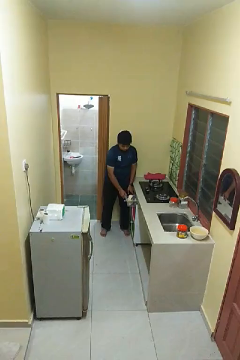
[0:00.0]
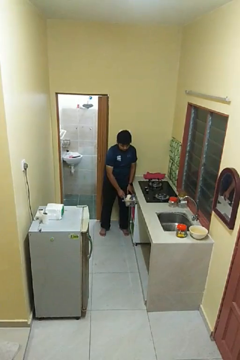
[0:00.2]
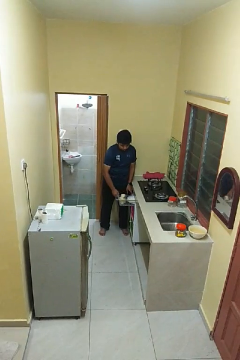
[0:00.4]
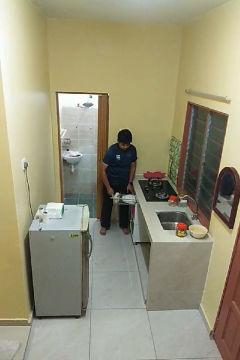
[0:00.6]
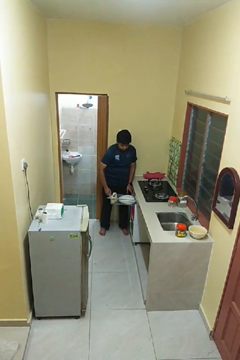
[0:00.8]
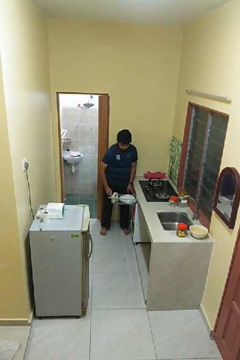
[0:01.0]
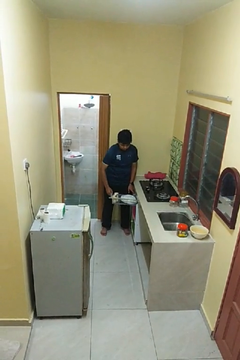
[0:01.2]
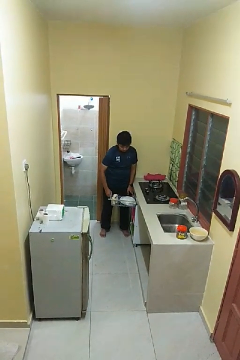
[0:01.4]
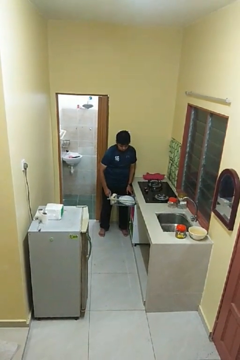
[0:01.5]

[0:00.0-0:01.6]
person opens kitchen drawer

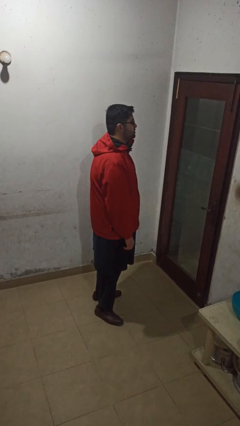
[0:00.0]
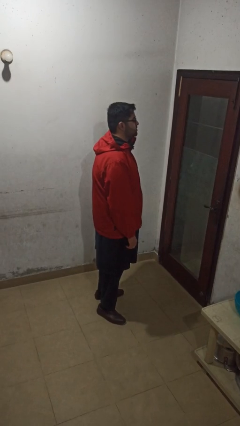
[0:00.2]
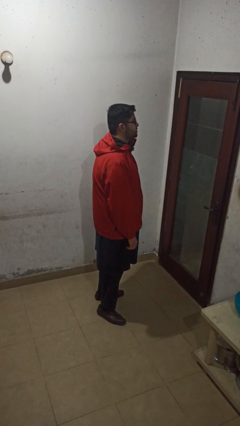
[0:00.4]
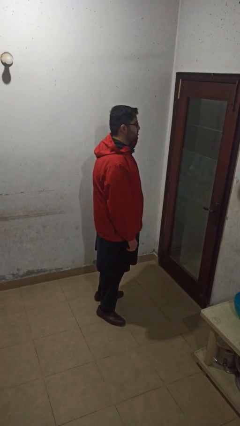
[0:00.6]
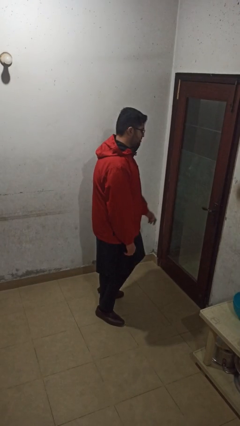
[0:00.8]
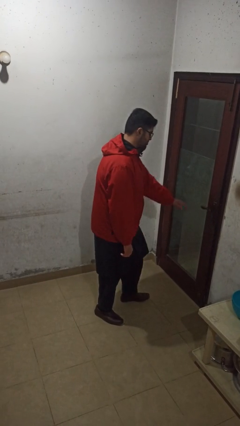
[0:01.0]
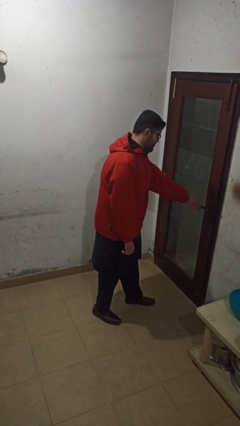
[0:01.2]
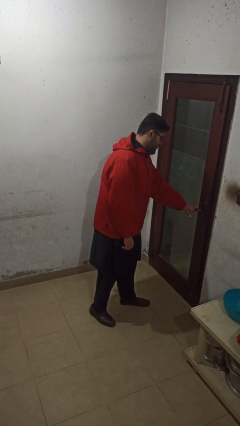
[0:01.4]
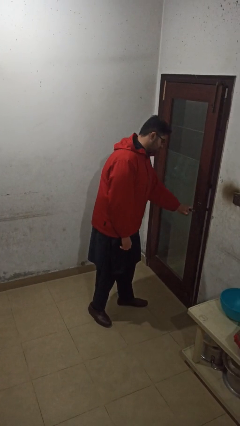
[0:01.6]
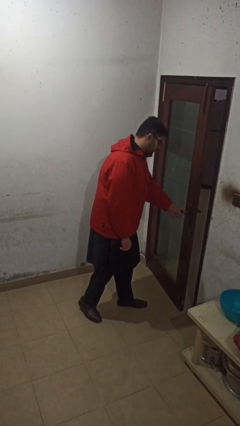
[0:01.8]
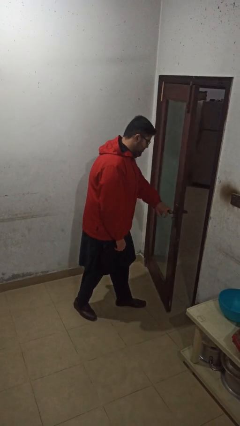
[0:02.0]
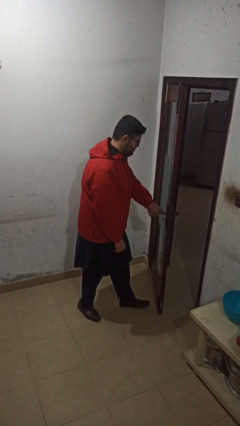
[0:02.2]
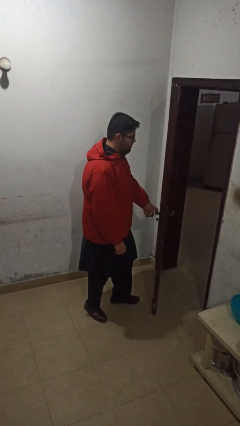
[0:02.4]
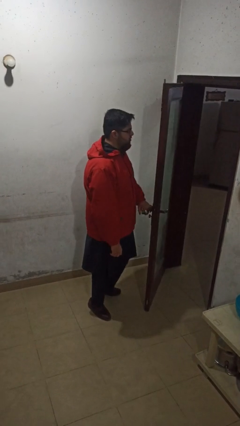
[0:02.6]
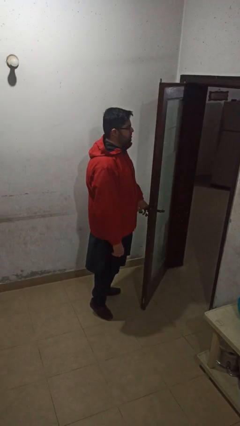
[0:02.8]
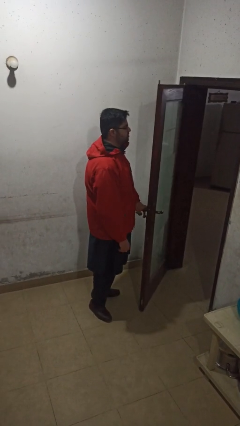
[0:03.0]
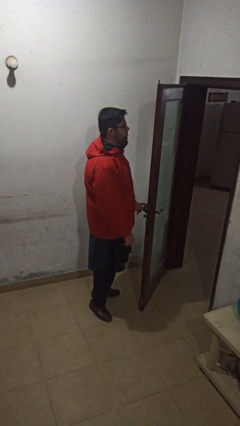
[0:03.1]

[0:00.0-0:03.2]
person opens facility door

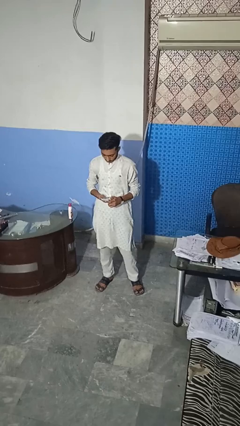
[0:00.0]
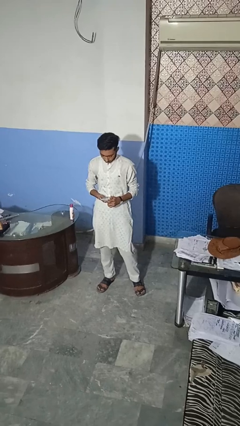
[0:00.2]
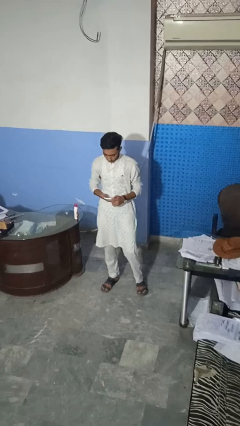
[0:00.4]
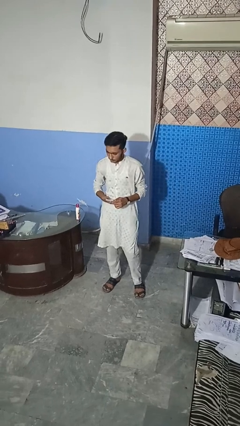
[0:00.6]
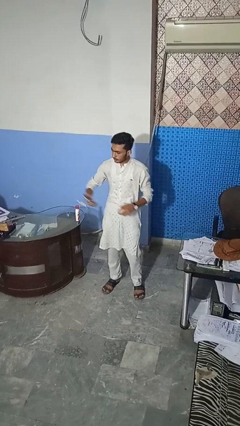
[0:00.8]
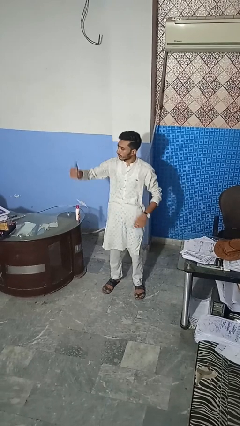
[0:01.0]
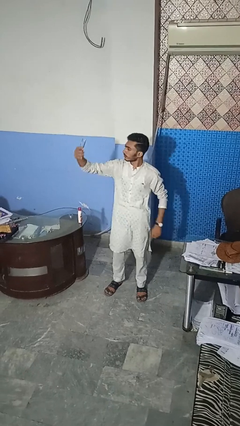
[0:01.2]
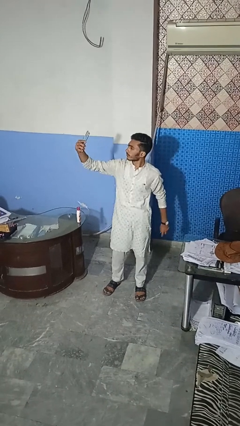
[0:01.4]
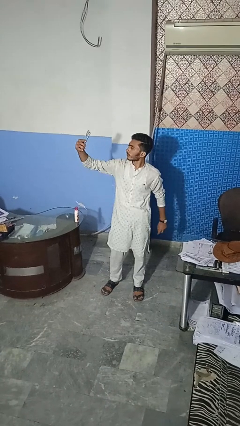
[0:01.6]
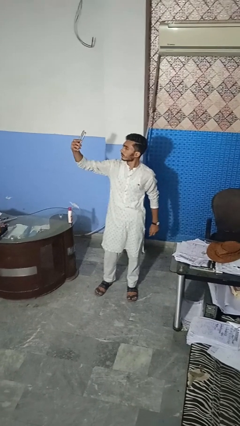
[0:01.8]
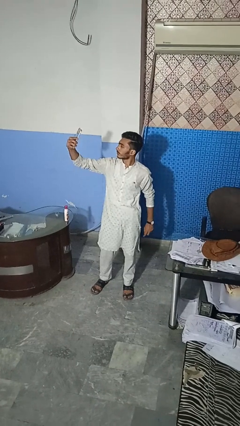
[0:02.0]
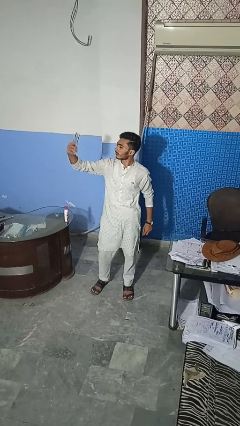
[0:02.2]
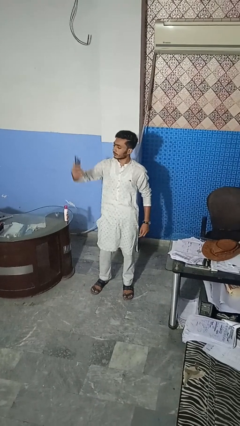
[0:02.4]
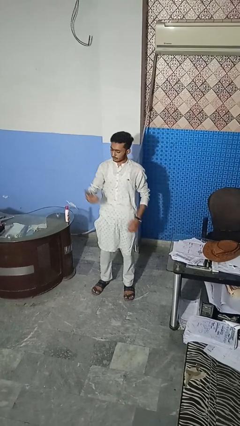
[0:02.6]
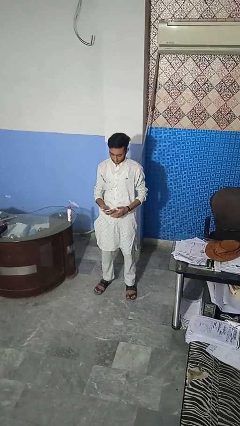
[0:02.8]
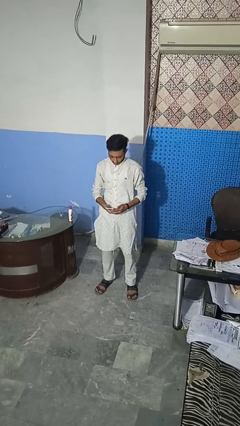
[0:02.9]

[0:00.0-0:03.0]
person takes selfie

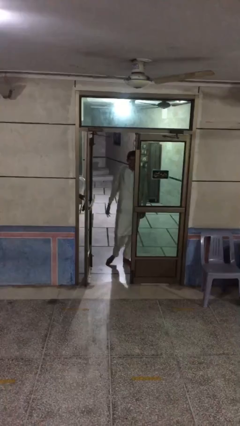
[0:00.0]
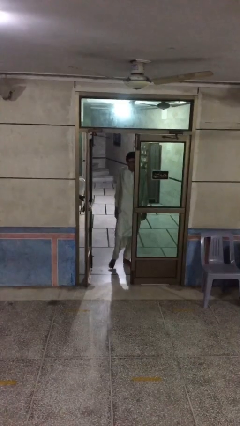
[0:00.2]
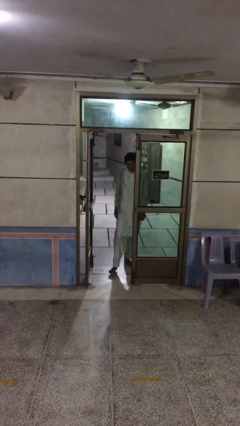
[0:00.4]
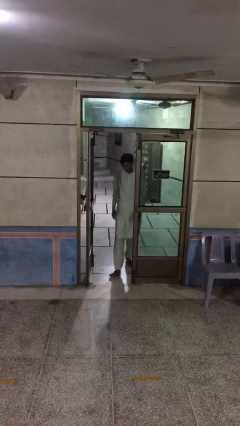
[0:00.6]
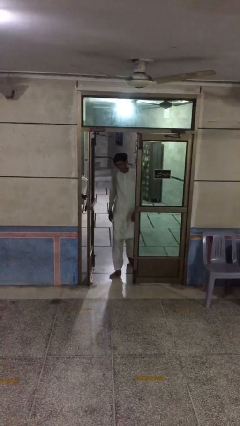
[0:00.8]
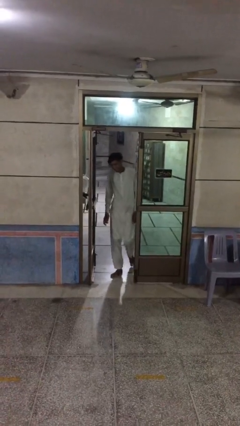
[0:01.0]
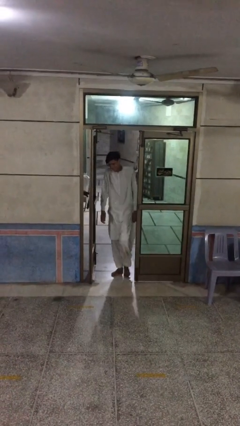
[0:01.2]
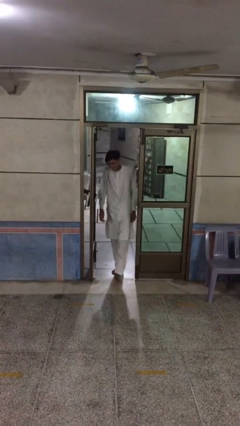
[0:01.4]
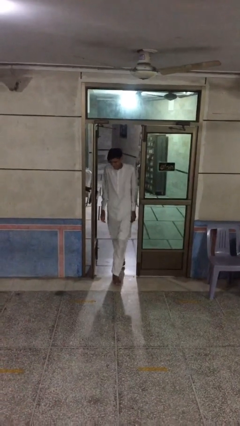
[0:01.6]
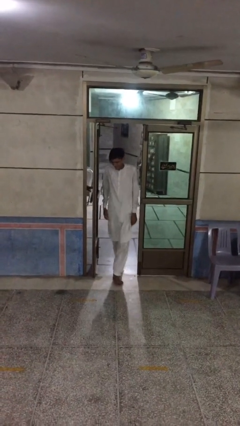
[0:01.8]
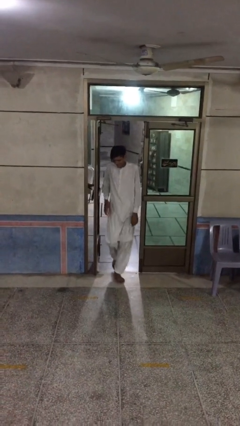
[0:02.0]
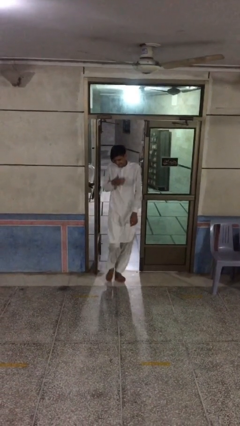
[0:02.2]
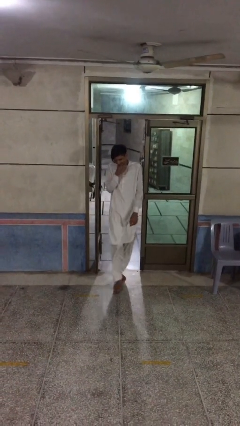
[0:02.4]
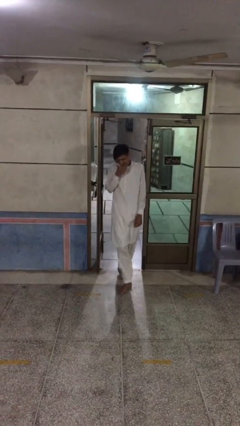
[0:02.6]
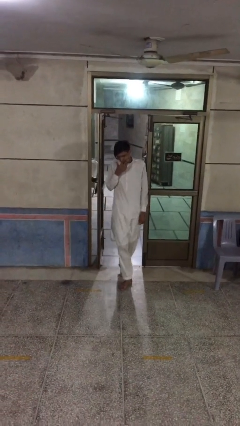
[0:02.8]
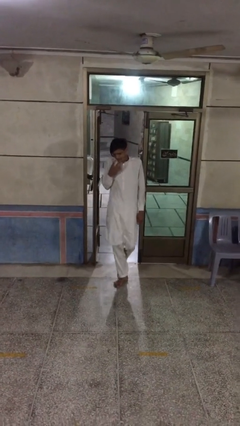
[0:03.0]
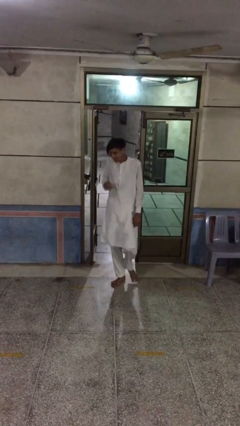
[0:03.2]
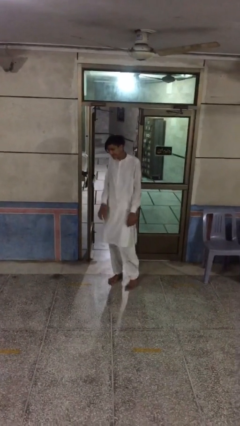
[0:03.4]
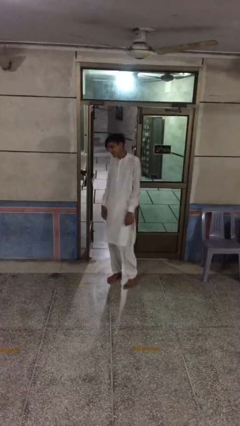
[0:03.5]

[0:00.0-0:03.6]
person enters scene through structure

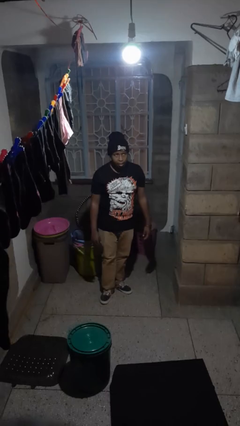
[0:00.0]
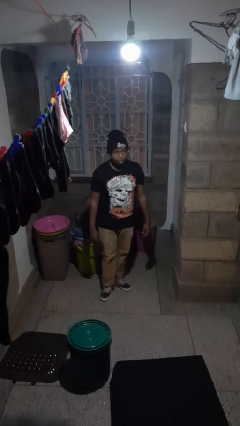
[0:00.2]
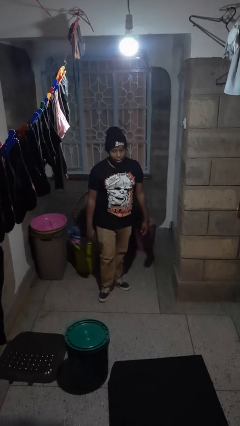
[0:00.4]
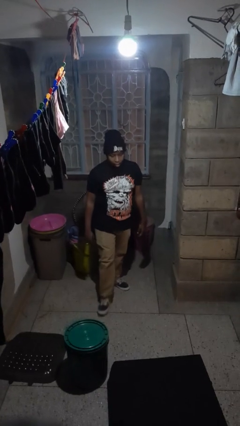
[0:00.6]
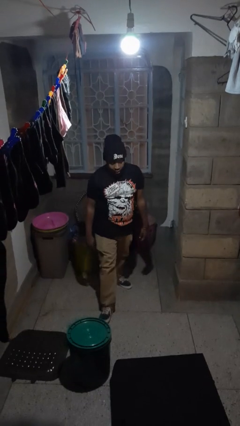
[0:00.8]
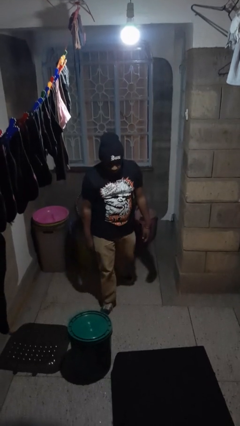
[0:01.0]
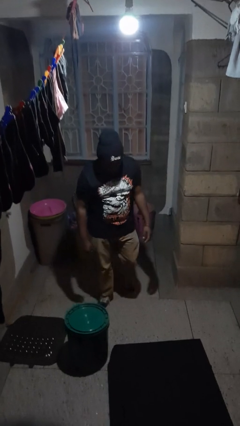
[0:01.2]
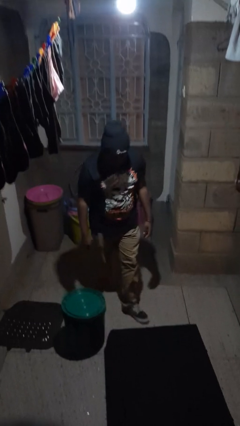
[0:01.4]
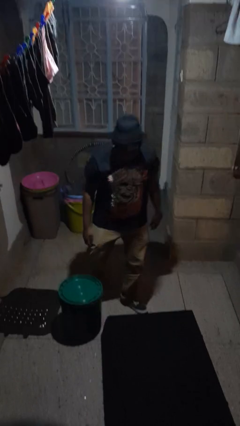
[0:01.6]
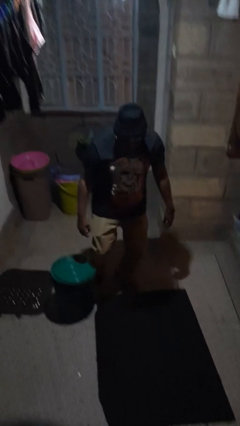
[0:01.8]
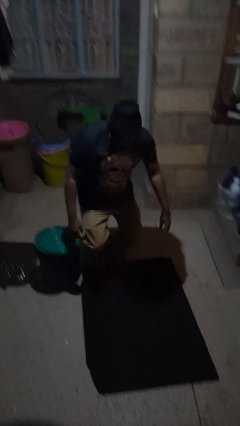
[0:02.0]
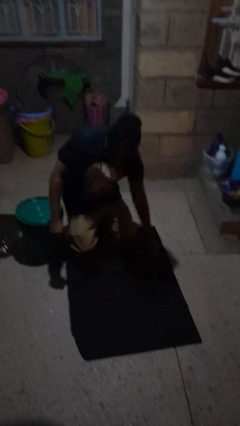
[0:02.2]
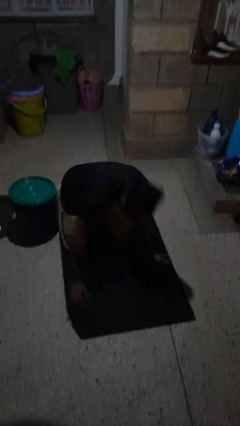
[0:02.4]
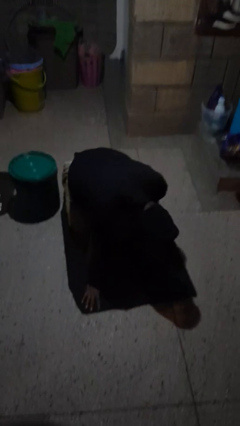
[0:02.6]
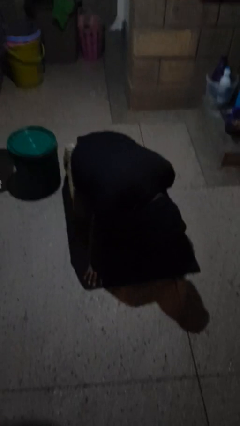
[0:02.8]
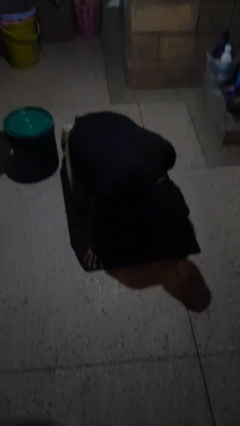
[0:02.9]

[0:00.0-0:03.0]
person trips on object on floor

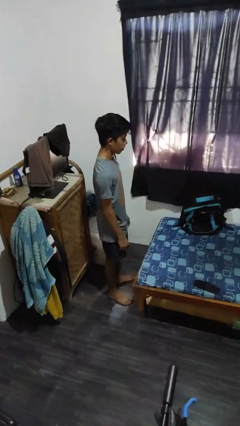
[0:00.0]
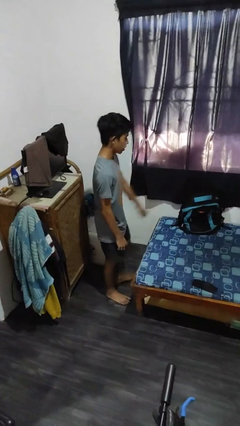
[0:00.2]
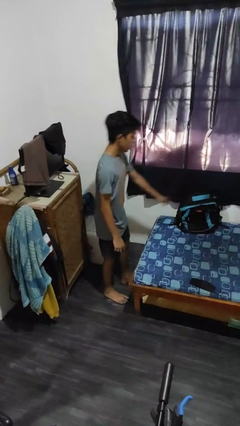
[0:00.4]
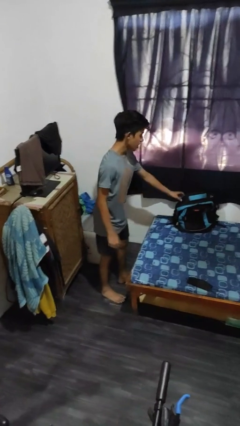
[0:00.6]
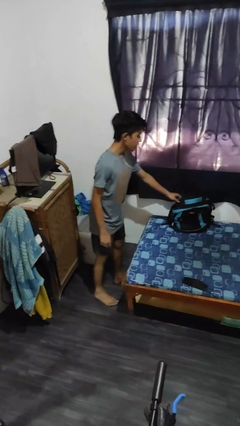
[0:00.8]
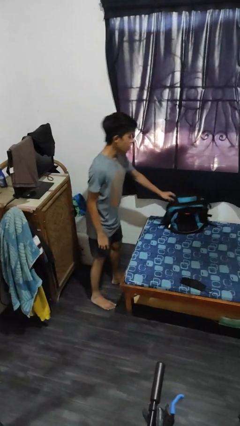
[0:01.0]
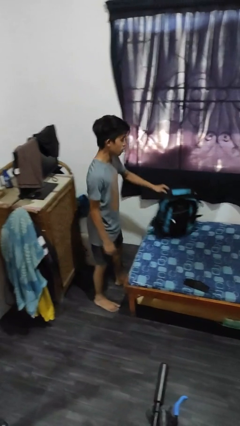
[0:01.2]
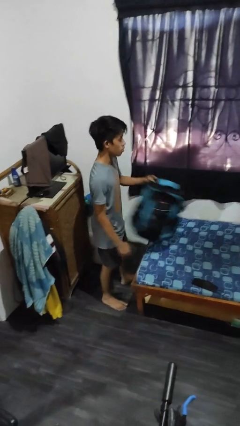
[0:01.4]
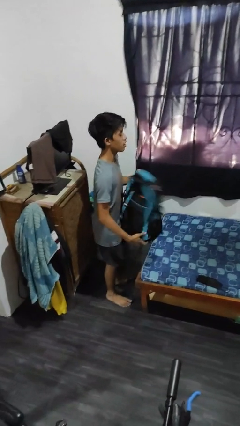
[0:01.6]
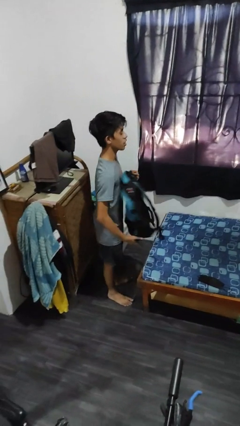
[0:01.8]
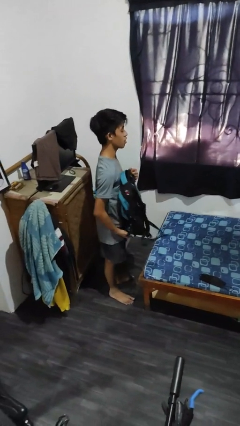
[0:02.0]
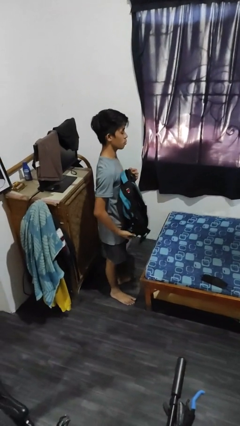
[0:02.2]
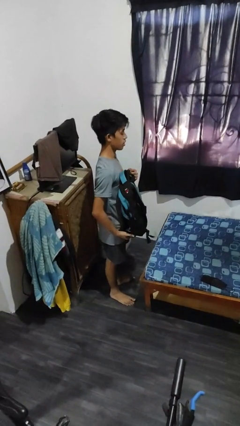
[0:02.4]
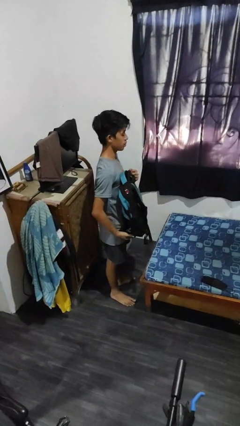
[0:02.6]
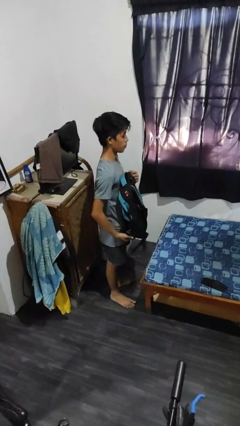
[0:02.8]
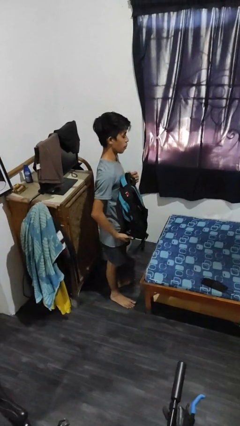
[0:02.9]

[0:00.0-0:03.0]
person picks up object from bed

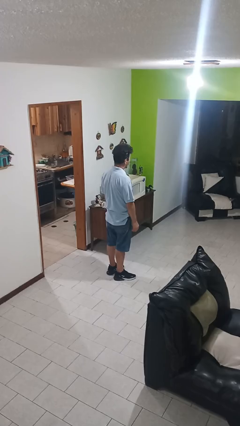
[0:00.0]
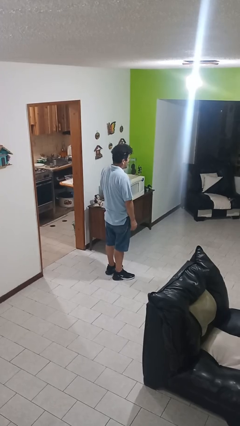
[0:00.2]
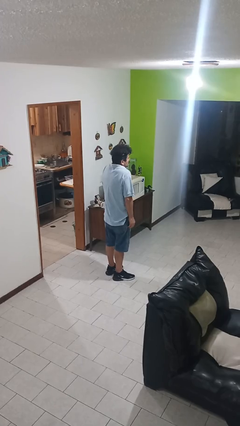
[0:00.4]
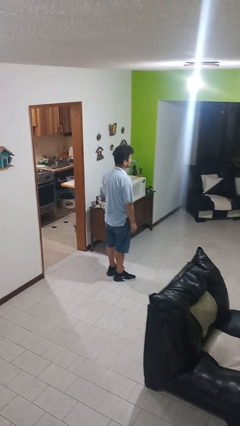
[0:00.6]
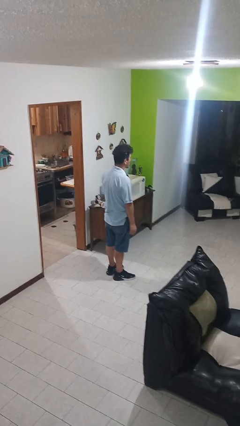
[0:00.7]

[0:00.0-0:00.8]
person shrugs
